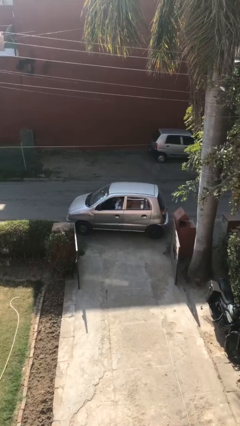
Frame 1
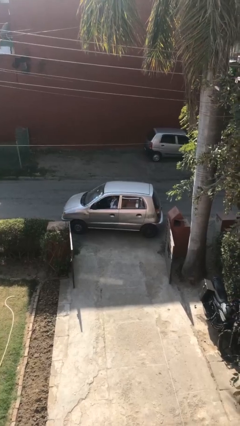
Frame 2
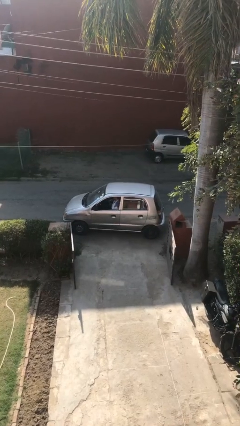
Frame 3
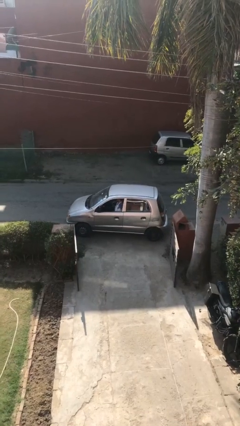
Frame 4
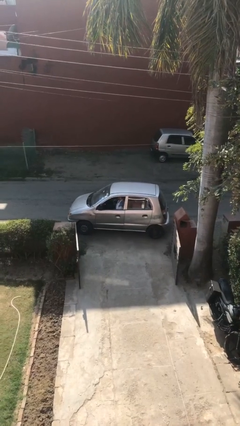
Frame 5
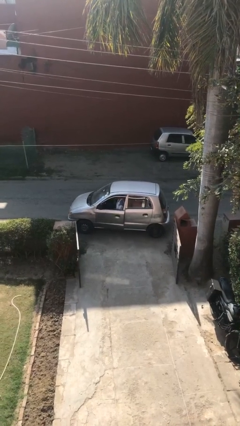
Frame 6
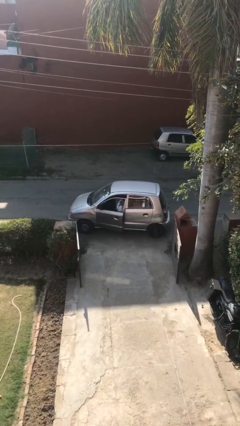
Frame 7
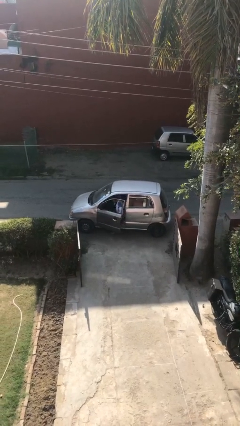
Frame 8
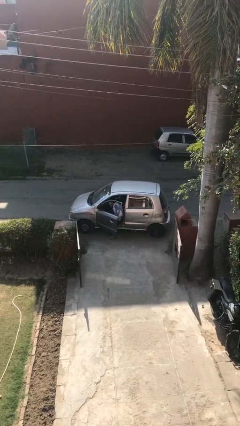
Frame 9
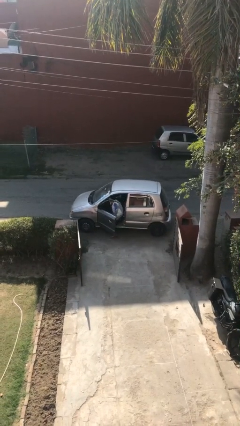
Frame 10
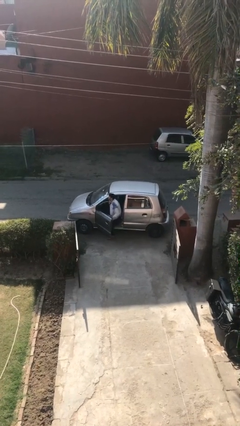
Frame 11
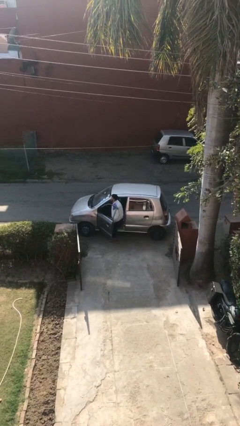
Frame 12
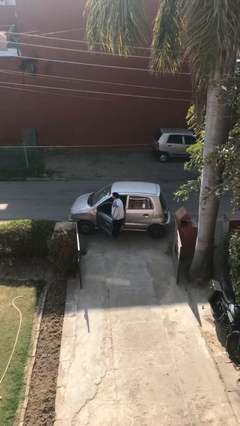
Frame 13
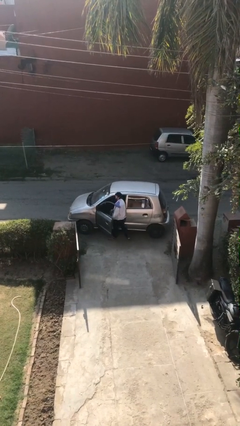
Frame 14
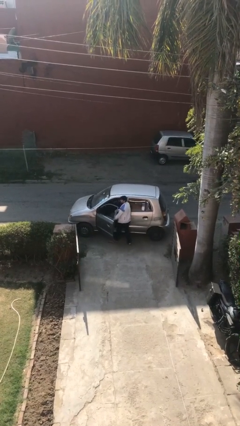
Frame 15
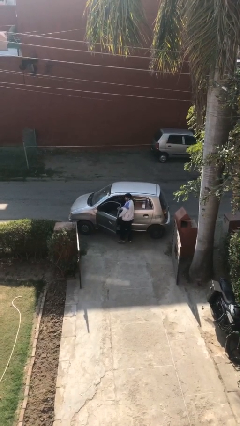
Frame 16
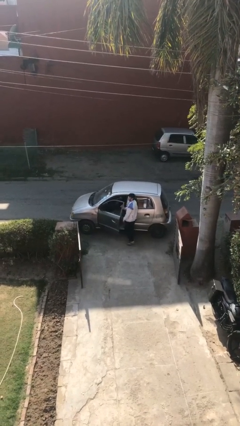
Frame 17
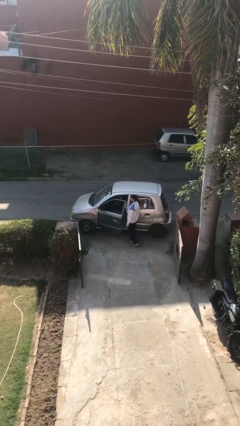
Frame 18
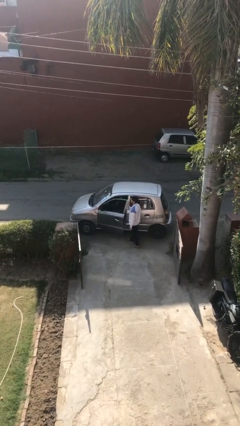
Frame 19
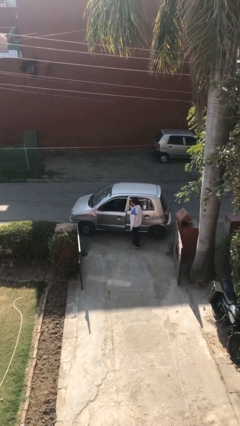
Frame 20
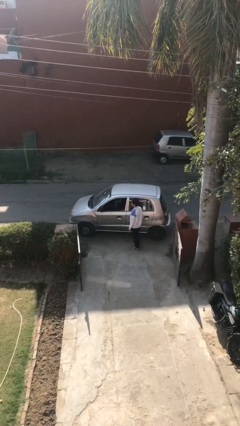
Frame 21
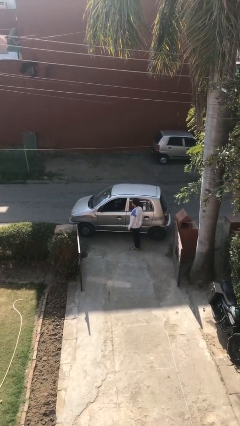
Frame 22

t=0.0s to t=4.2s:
car drops off person

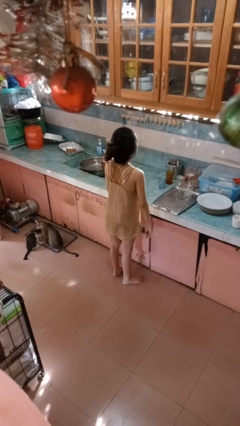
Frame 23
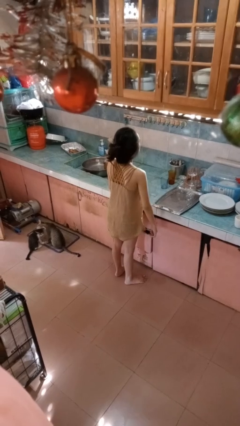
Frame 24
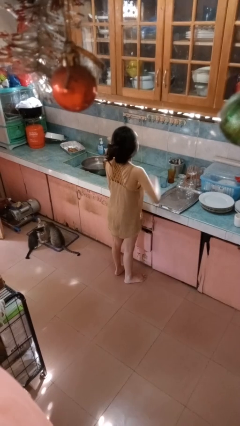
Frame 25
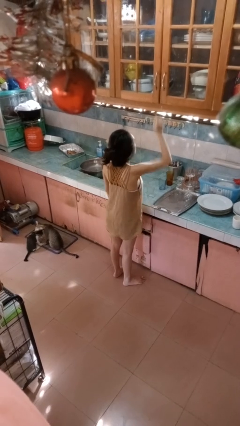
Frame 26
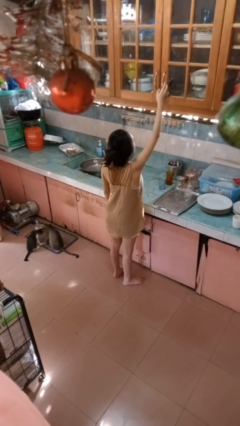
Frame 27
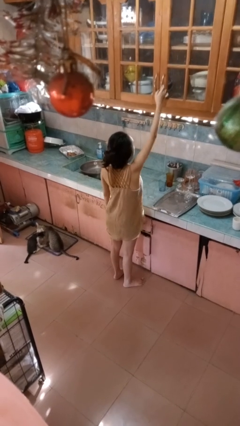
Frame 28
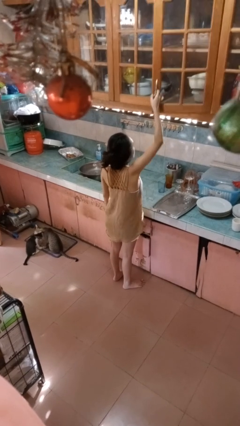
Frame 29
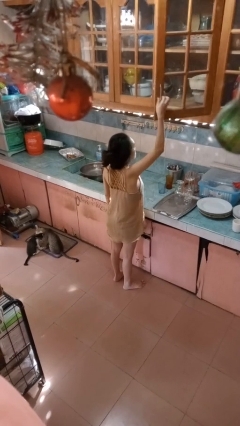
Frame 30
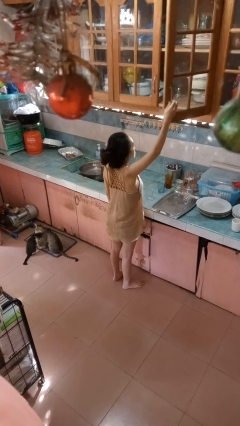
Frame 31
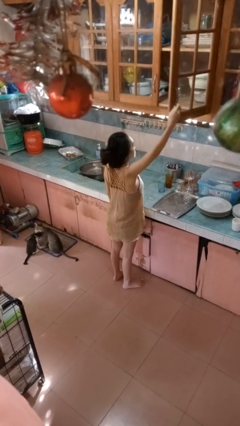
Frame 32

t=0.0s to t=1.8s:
person opens cabinet

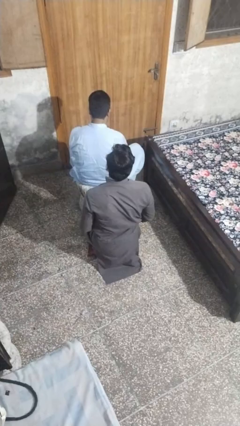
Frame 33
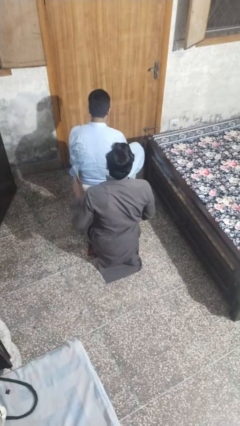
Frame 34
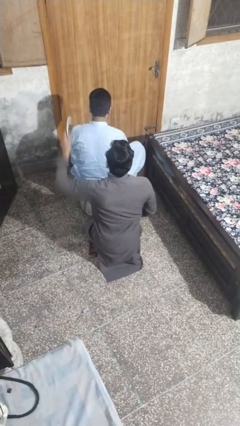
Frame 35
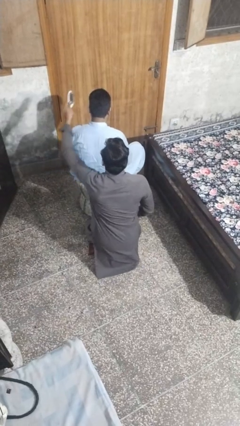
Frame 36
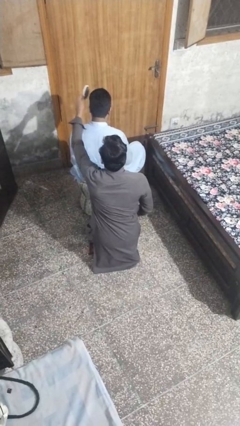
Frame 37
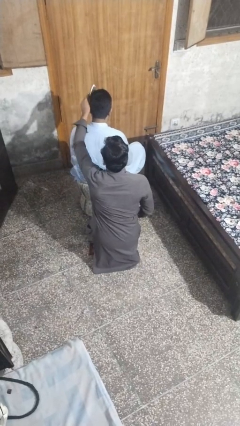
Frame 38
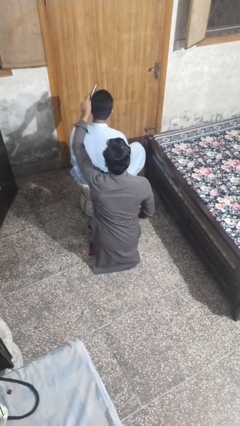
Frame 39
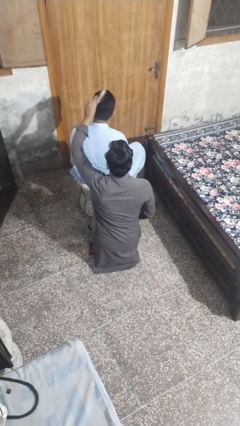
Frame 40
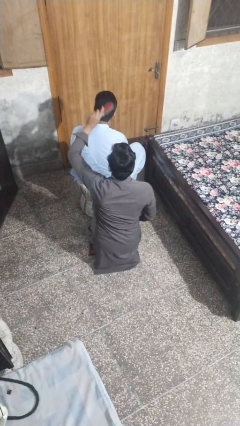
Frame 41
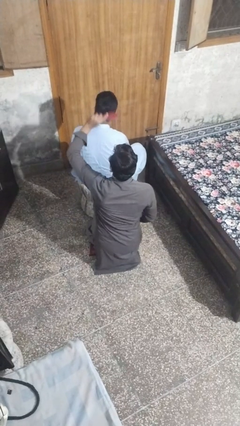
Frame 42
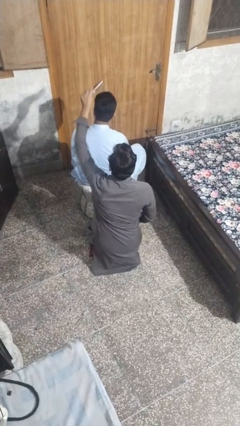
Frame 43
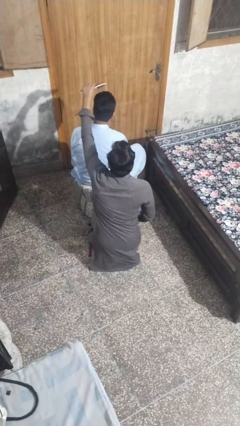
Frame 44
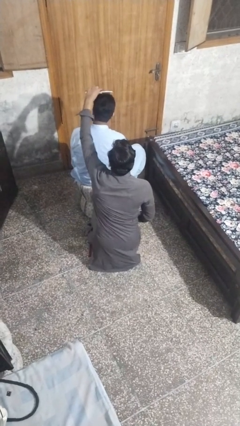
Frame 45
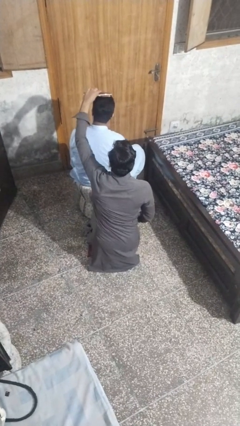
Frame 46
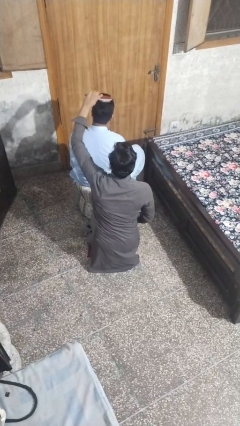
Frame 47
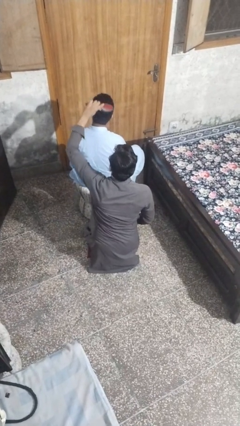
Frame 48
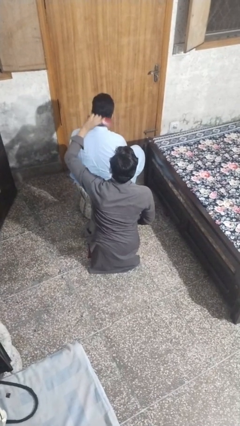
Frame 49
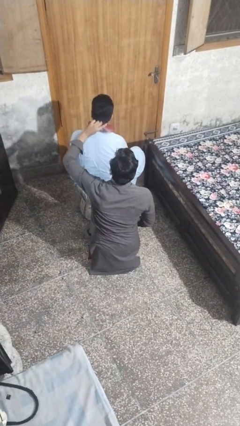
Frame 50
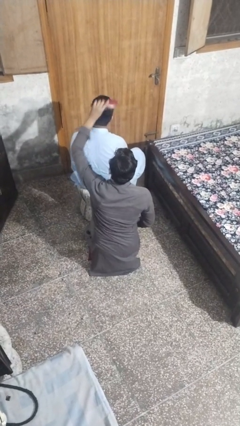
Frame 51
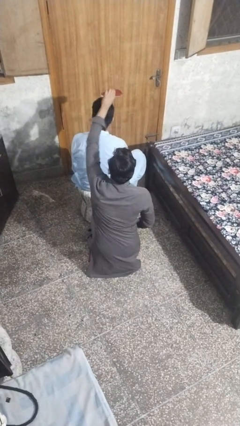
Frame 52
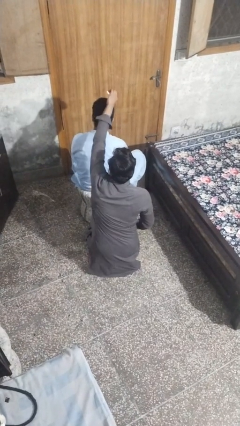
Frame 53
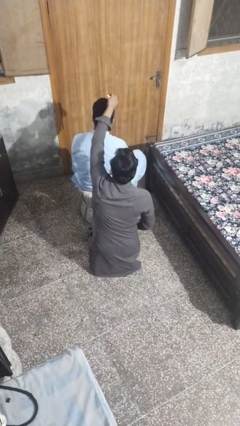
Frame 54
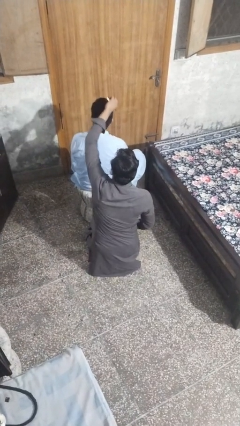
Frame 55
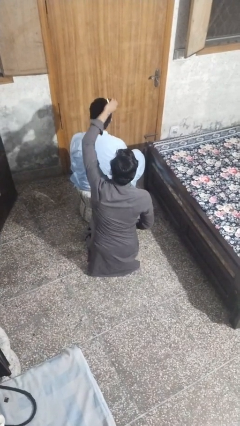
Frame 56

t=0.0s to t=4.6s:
person brushes hair of person

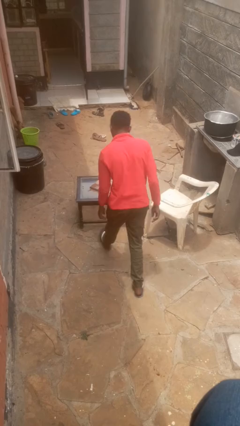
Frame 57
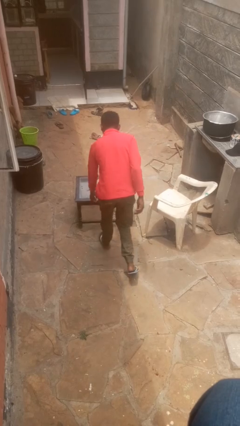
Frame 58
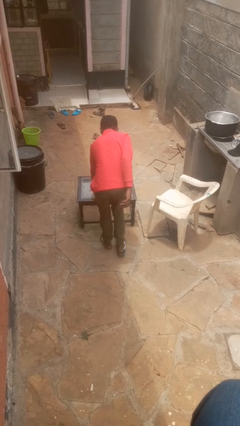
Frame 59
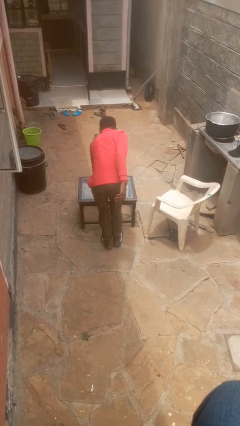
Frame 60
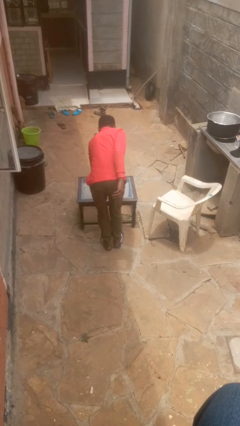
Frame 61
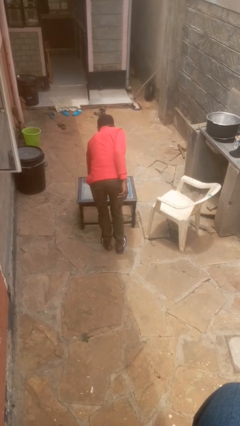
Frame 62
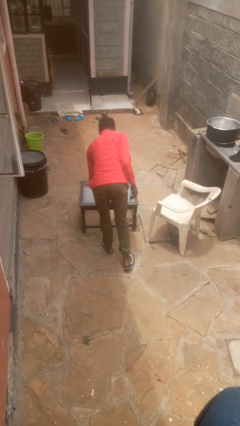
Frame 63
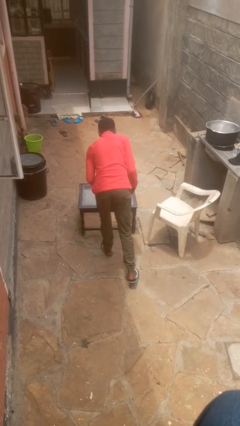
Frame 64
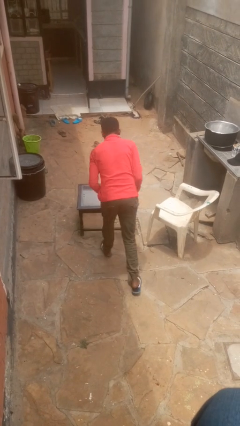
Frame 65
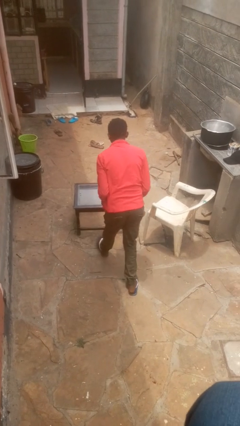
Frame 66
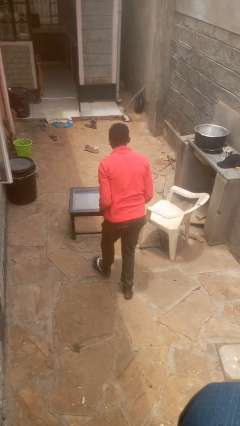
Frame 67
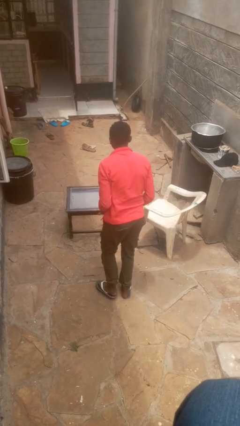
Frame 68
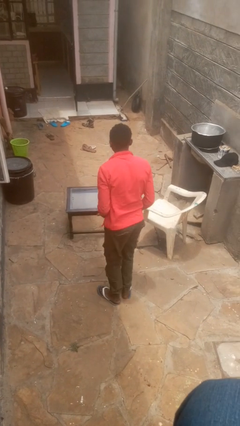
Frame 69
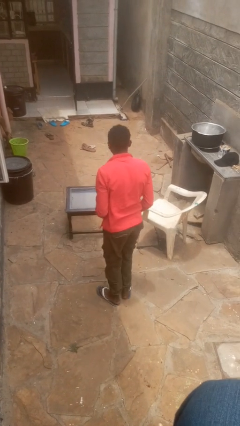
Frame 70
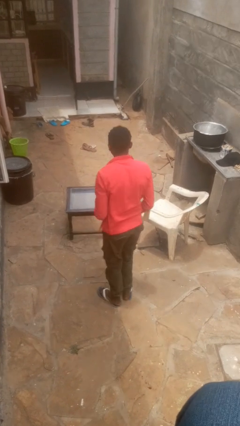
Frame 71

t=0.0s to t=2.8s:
person picks up object from table

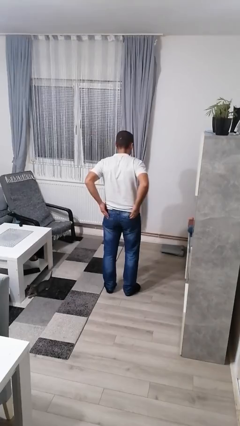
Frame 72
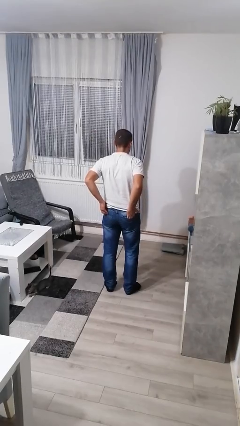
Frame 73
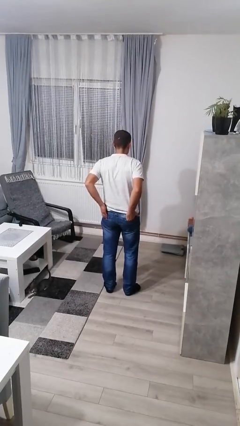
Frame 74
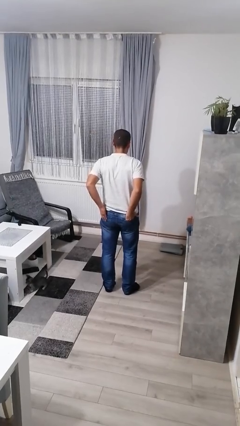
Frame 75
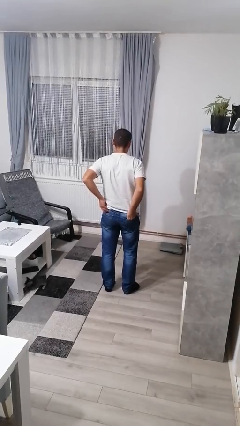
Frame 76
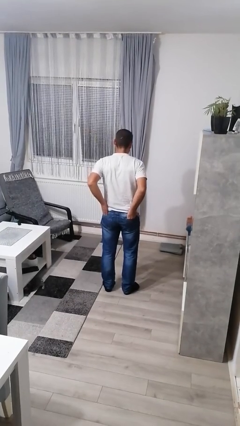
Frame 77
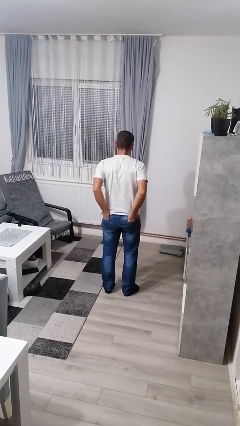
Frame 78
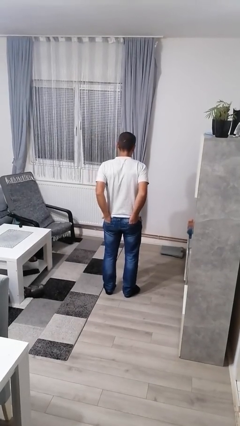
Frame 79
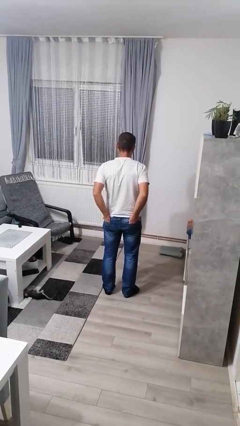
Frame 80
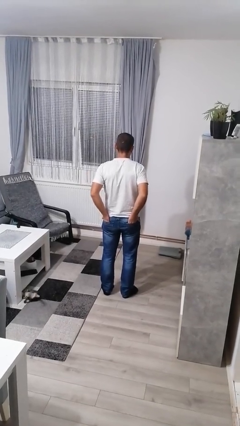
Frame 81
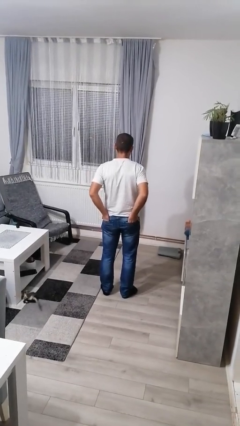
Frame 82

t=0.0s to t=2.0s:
person puts hands in back pockets

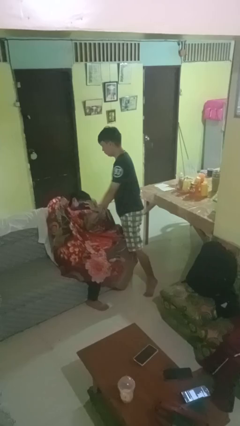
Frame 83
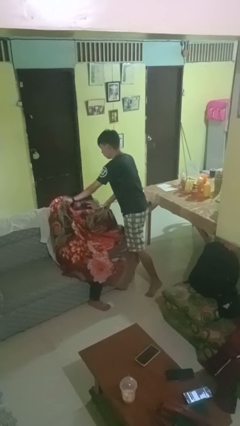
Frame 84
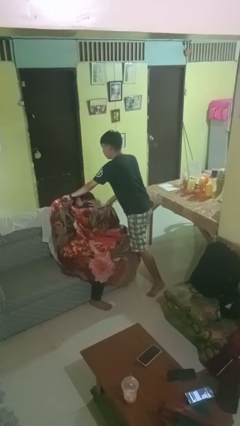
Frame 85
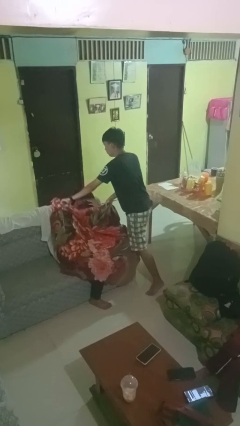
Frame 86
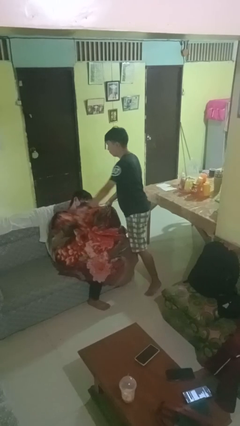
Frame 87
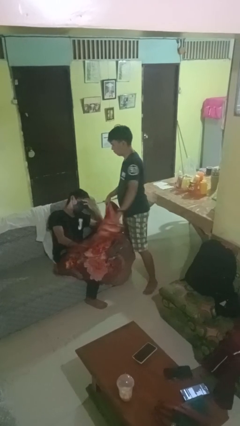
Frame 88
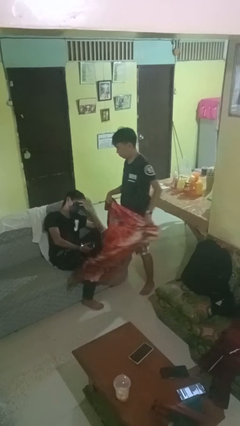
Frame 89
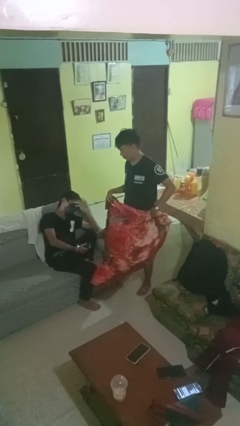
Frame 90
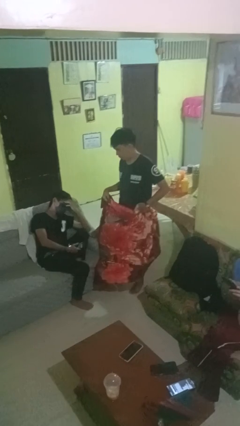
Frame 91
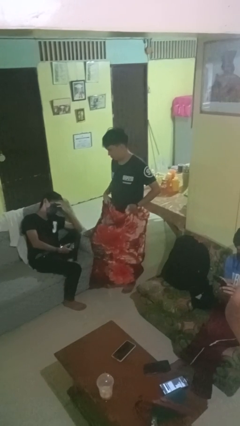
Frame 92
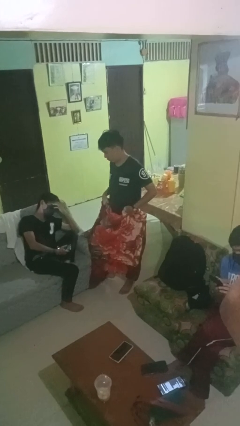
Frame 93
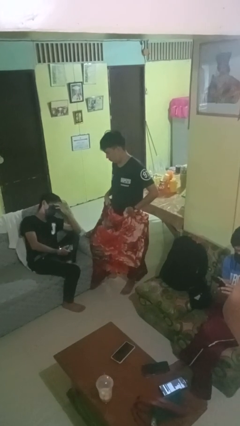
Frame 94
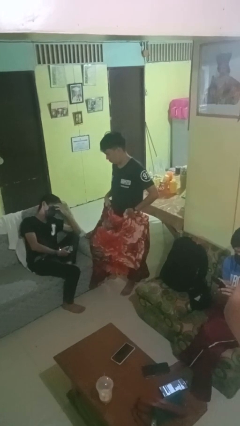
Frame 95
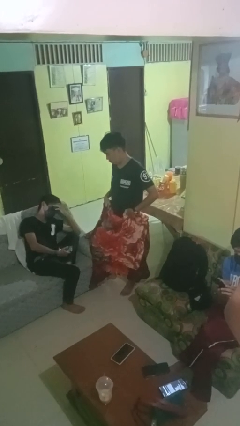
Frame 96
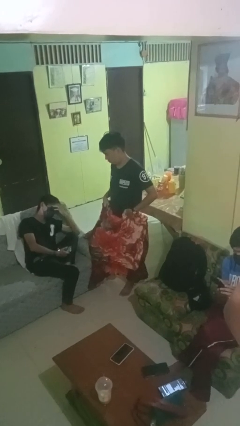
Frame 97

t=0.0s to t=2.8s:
person uncovers friend with blanket
